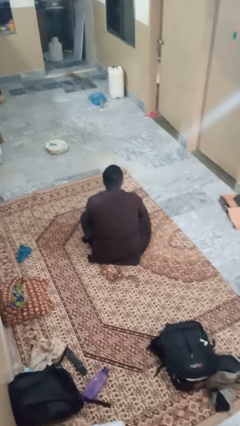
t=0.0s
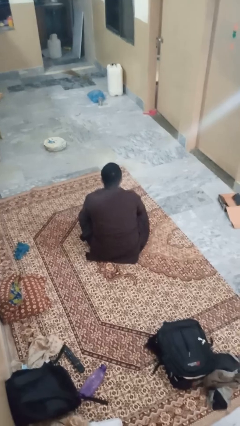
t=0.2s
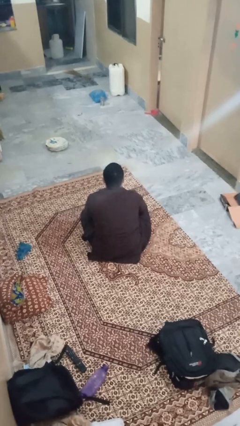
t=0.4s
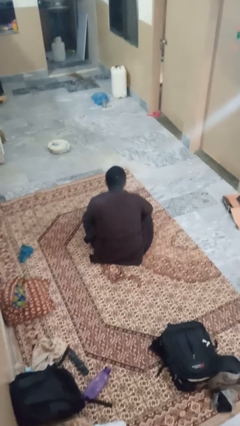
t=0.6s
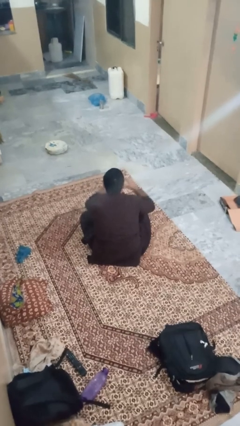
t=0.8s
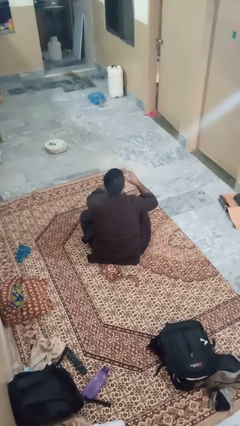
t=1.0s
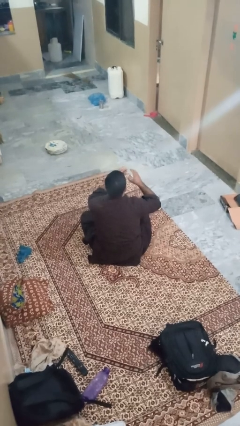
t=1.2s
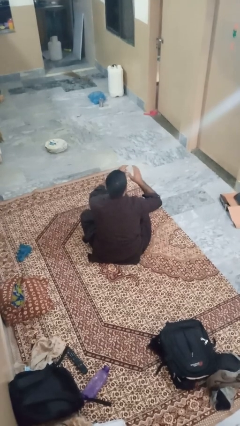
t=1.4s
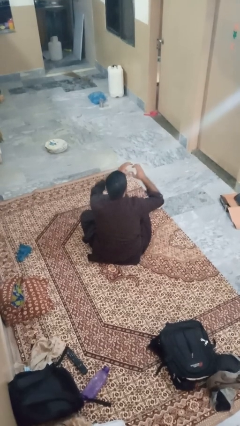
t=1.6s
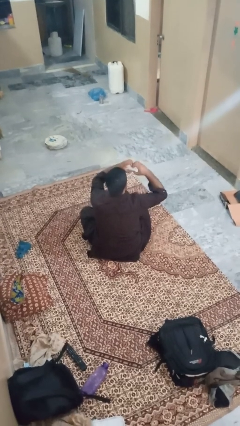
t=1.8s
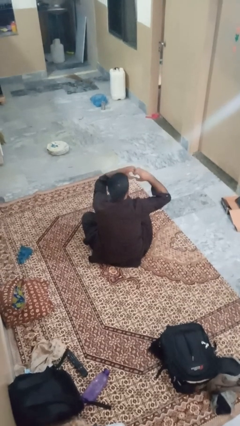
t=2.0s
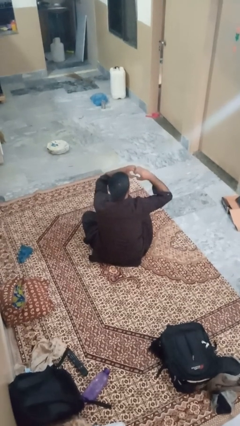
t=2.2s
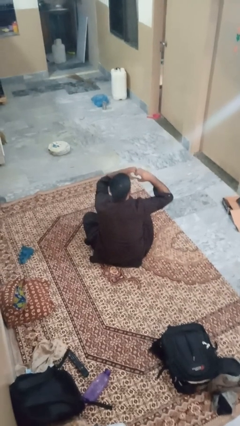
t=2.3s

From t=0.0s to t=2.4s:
person gestures heart

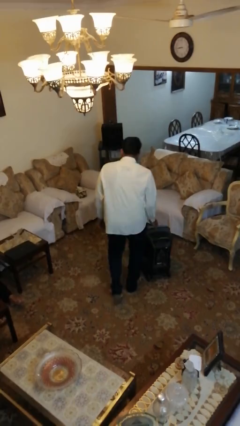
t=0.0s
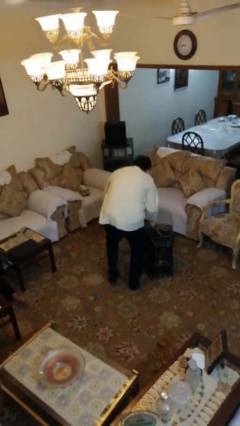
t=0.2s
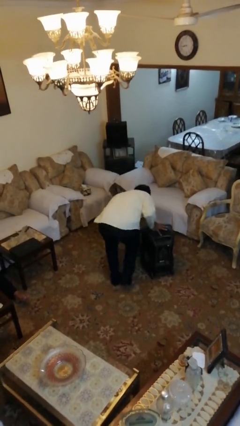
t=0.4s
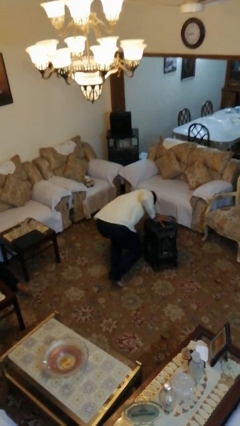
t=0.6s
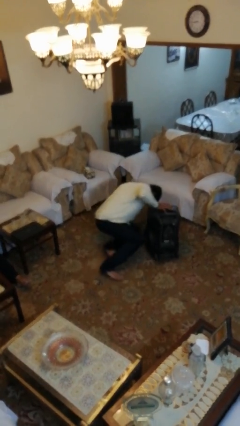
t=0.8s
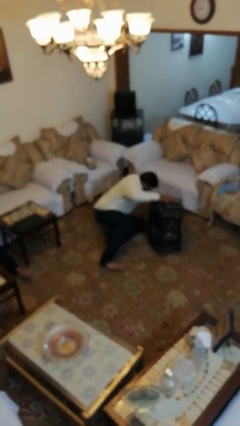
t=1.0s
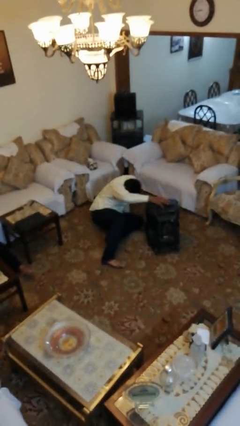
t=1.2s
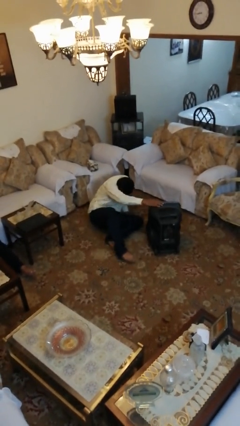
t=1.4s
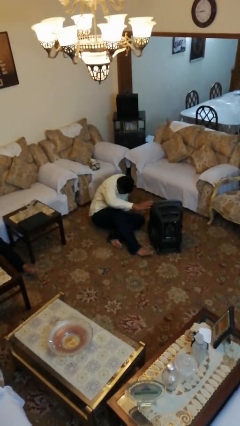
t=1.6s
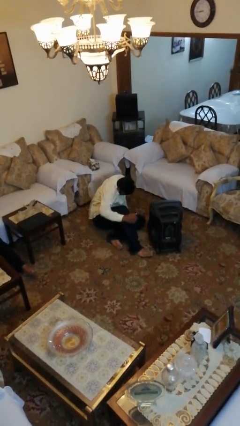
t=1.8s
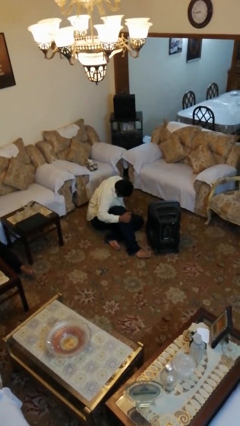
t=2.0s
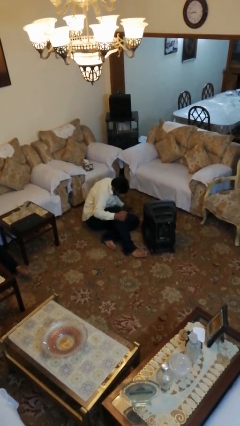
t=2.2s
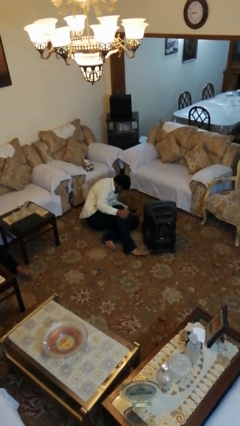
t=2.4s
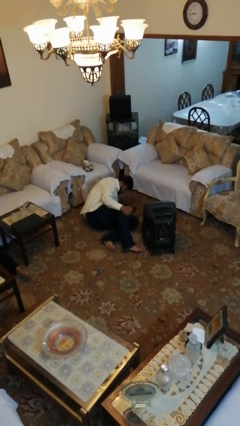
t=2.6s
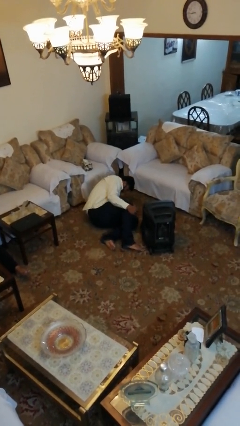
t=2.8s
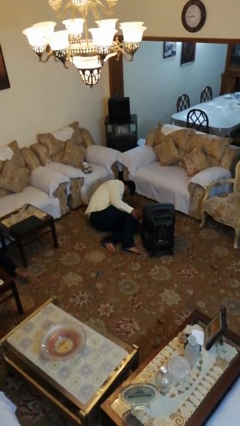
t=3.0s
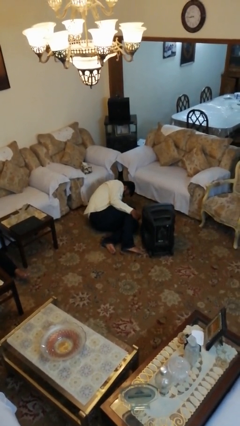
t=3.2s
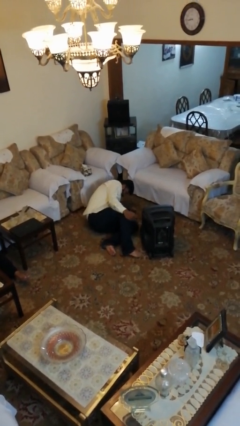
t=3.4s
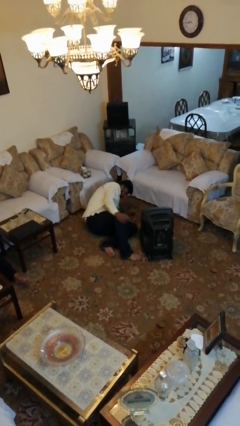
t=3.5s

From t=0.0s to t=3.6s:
person trips on object on floor

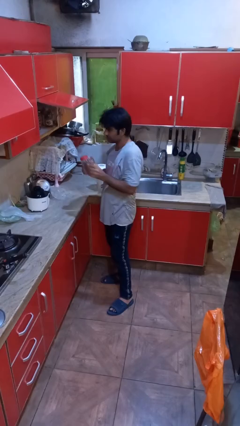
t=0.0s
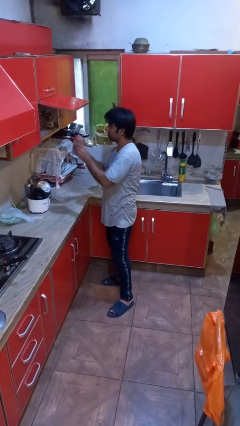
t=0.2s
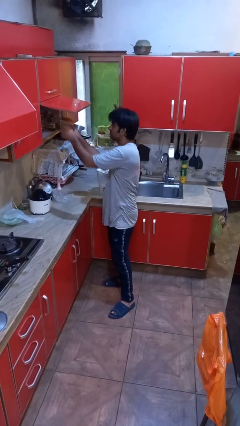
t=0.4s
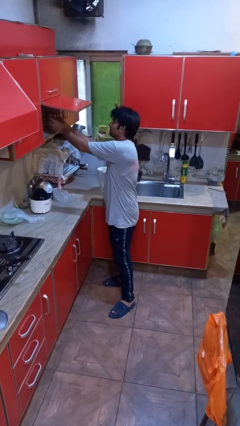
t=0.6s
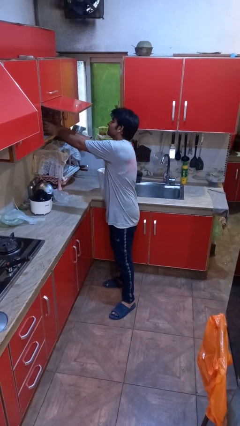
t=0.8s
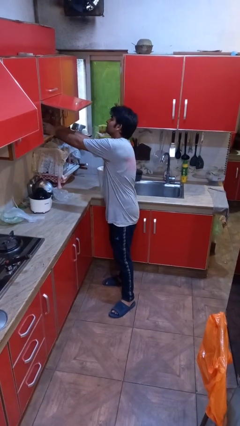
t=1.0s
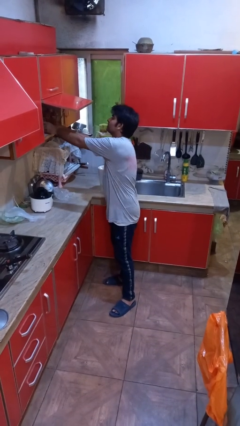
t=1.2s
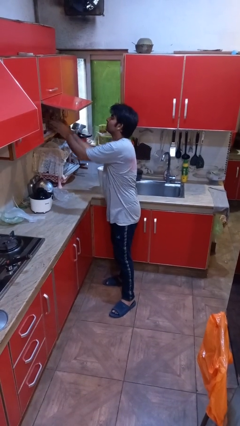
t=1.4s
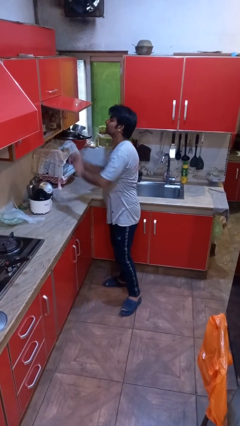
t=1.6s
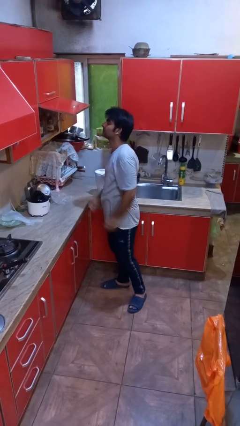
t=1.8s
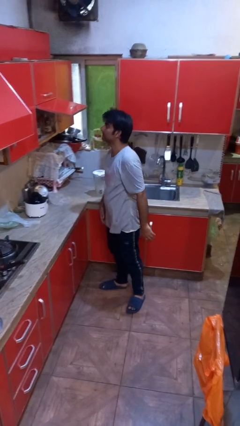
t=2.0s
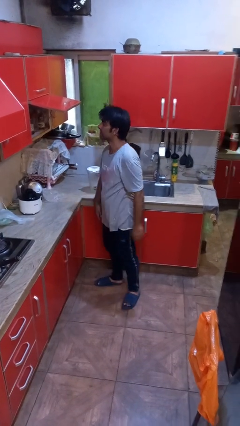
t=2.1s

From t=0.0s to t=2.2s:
person puts down object into cabinet

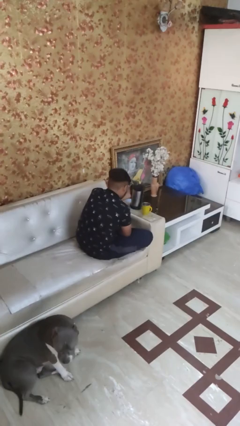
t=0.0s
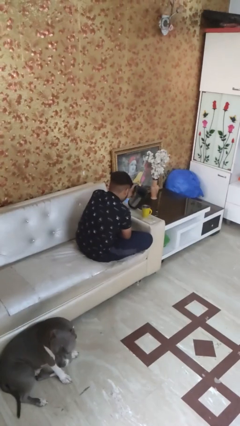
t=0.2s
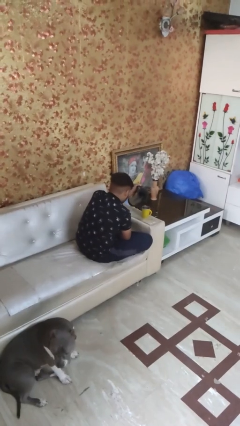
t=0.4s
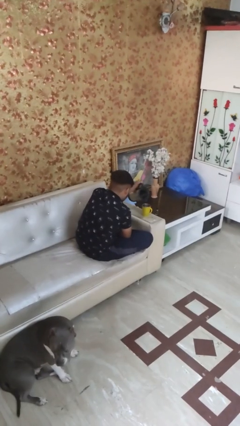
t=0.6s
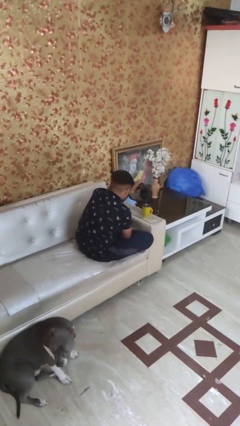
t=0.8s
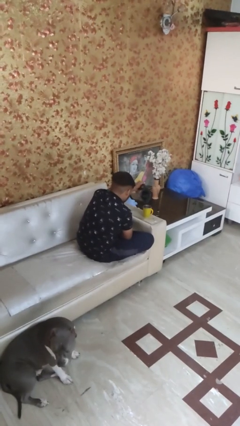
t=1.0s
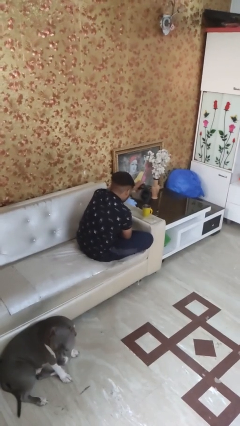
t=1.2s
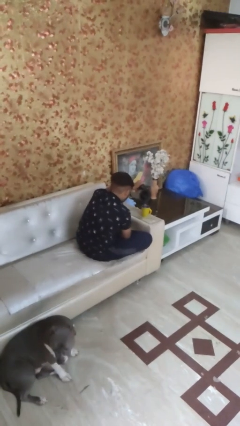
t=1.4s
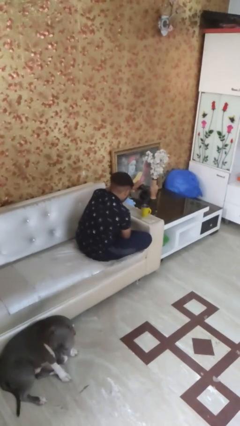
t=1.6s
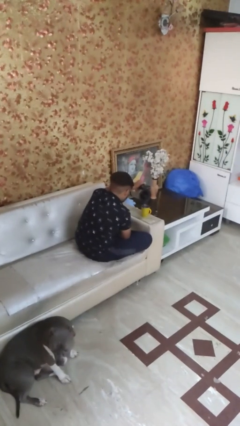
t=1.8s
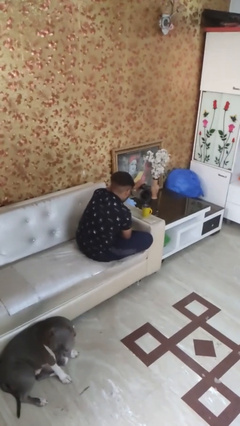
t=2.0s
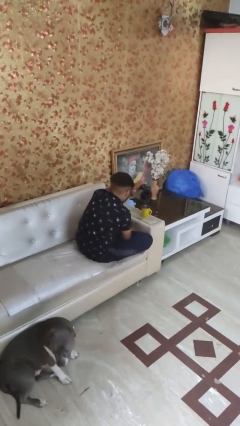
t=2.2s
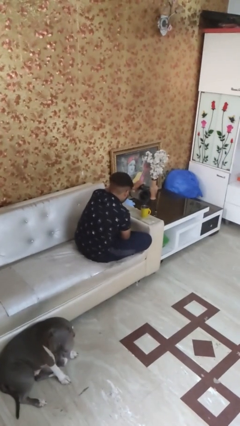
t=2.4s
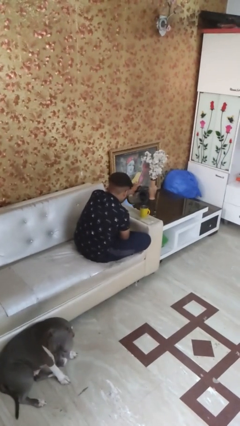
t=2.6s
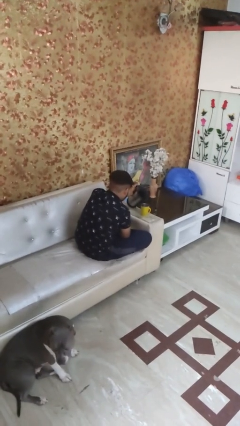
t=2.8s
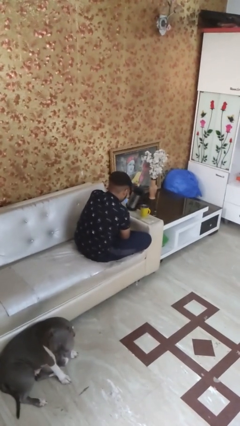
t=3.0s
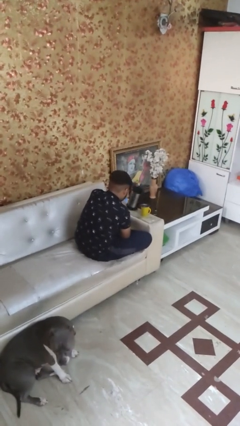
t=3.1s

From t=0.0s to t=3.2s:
person pours coffee into mug

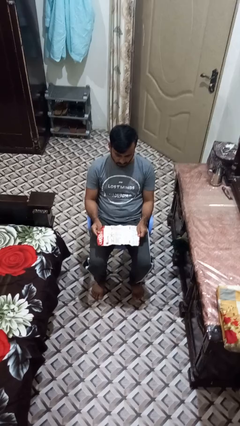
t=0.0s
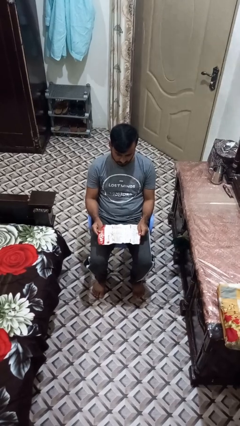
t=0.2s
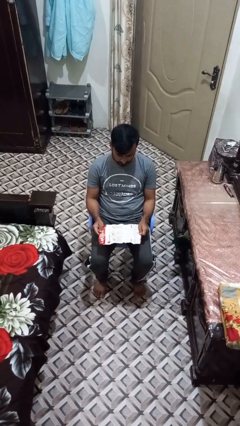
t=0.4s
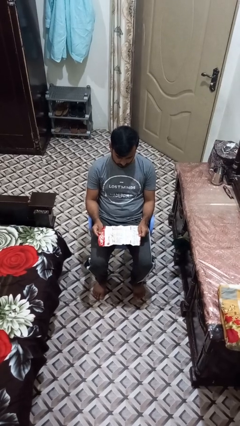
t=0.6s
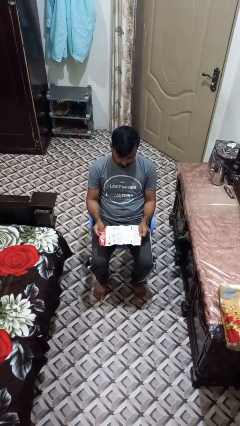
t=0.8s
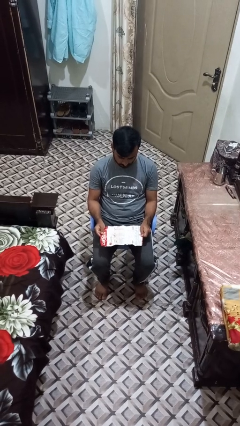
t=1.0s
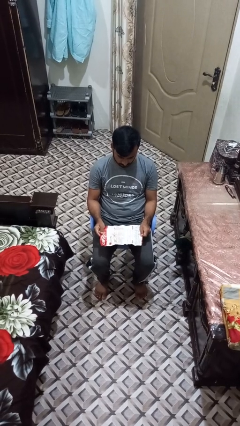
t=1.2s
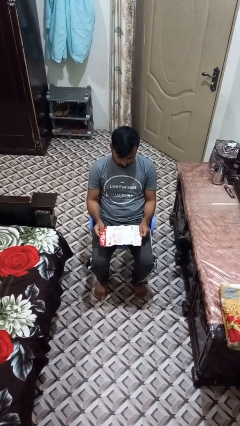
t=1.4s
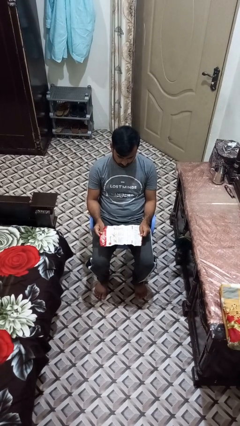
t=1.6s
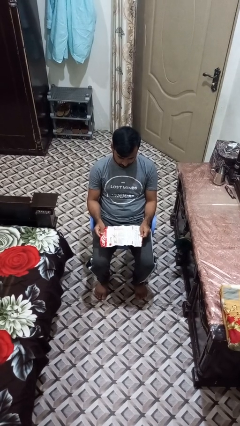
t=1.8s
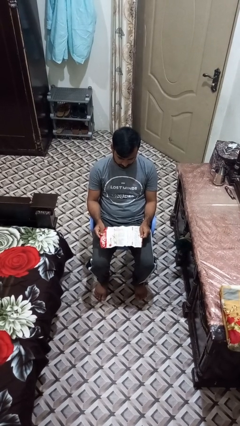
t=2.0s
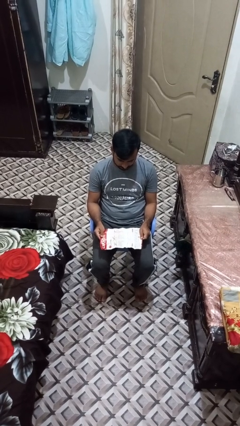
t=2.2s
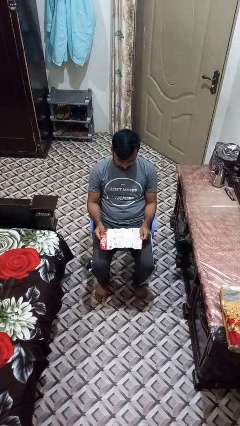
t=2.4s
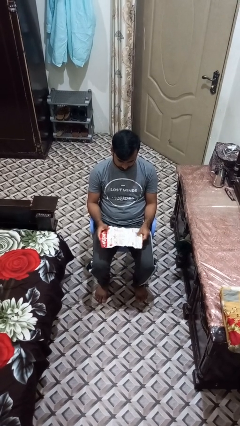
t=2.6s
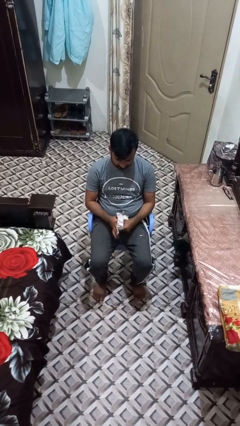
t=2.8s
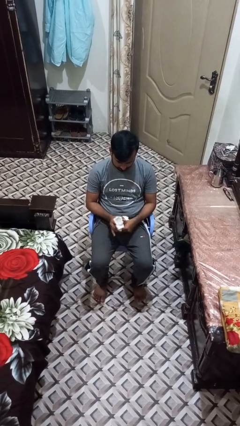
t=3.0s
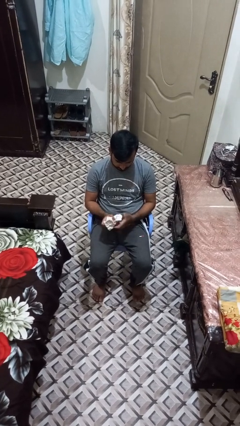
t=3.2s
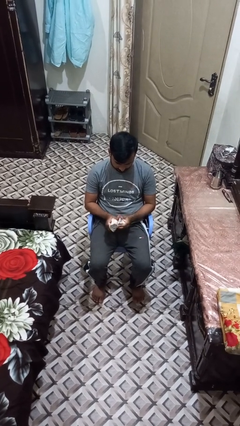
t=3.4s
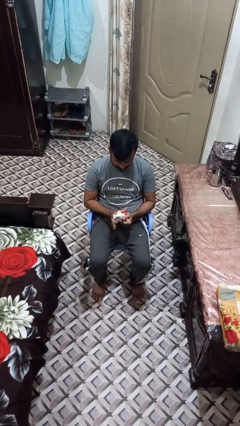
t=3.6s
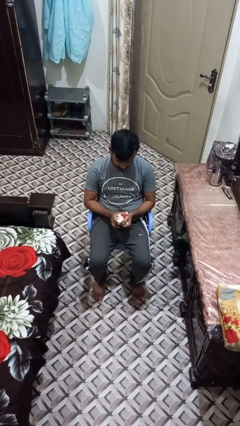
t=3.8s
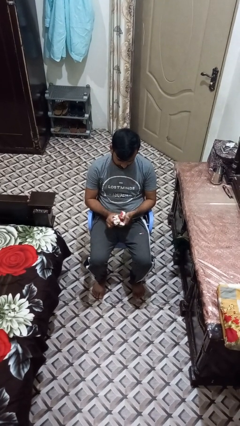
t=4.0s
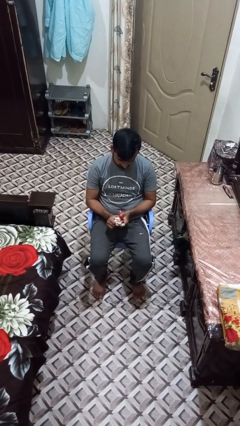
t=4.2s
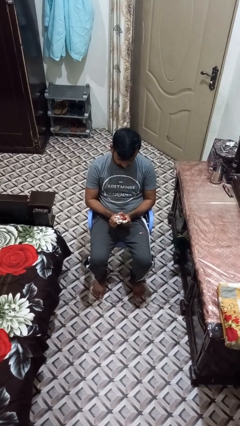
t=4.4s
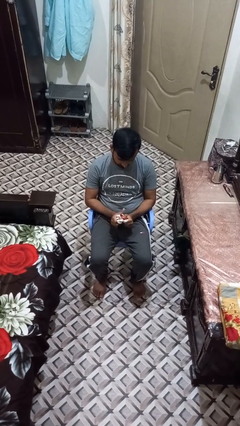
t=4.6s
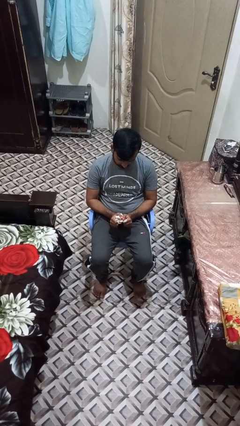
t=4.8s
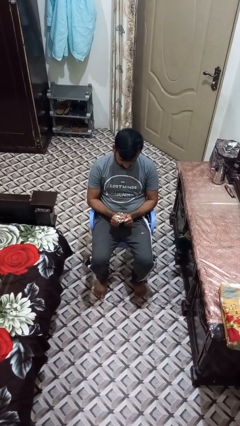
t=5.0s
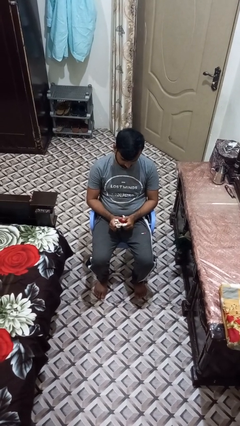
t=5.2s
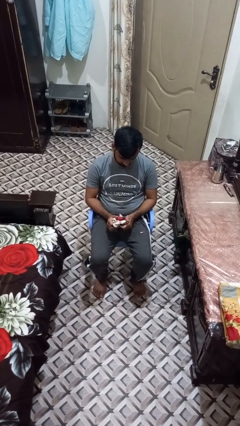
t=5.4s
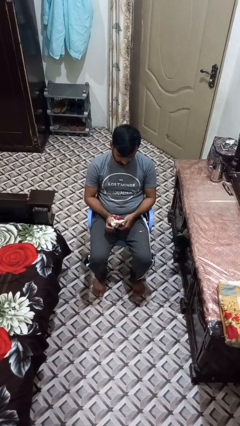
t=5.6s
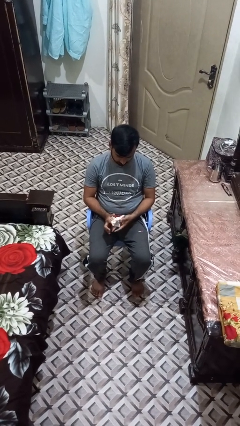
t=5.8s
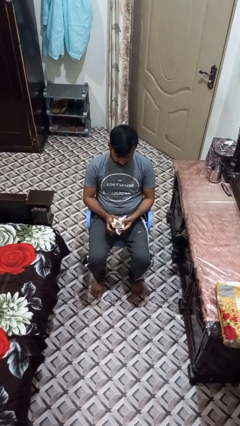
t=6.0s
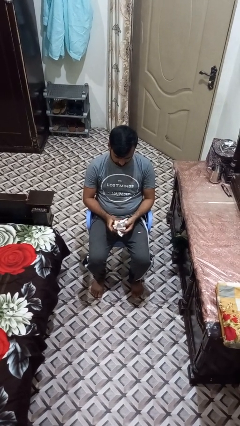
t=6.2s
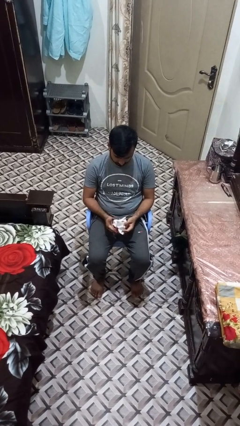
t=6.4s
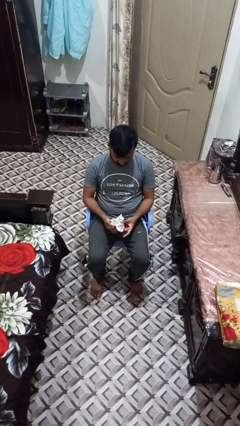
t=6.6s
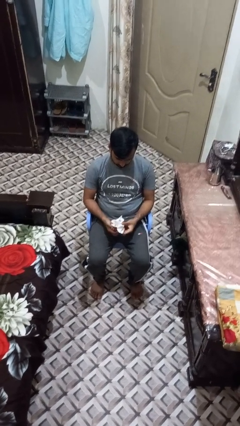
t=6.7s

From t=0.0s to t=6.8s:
person crumples paper
